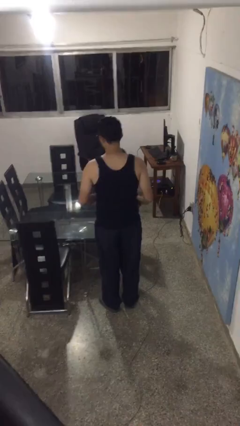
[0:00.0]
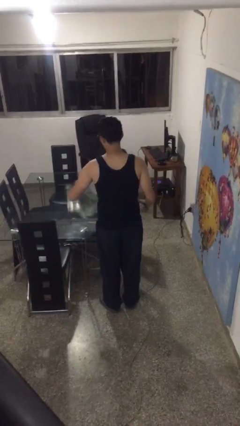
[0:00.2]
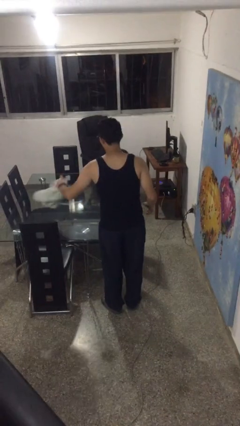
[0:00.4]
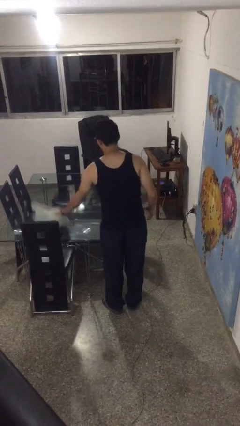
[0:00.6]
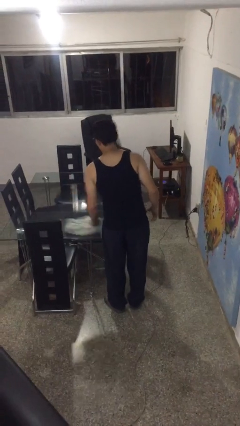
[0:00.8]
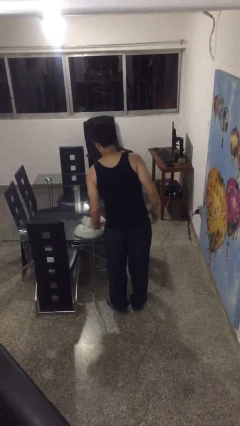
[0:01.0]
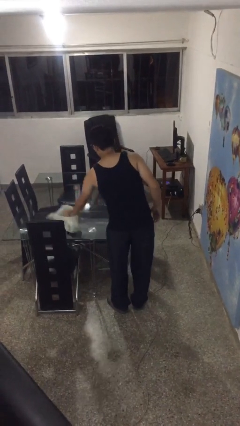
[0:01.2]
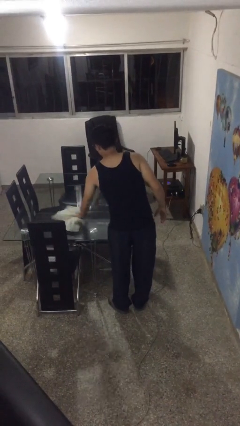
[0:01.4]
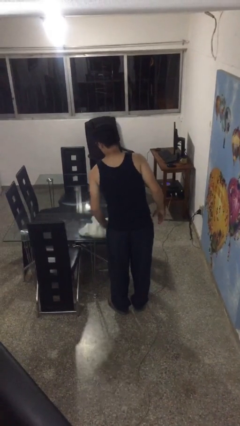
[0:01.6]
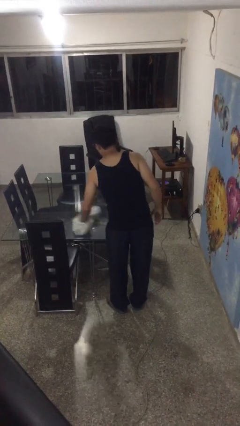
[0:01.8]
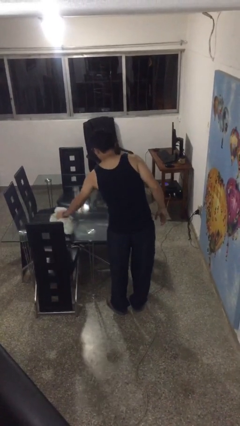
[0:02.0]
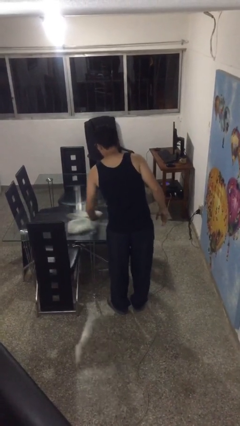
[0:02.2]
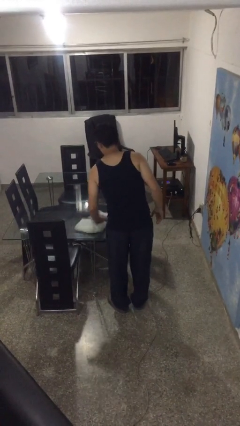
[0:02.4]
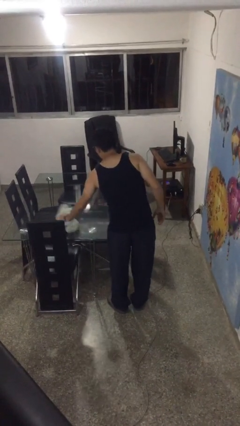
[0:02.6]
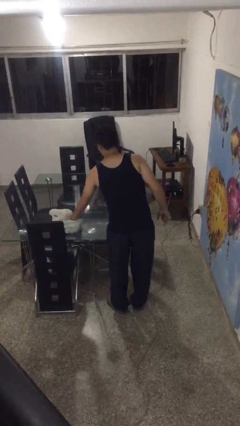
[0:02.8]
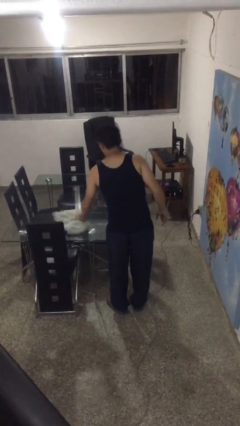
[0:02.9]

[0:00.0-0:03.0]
person cleans table with rag

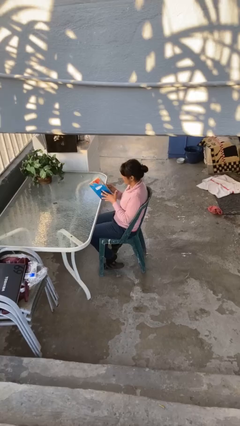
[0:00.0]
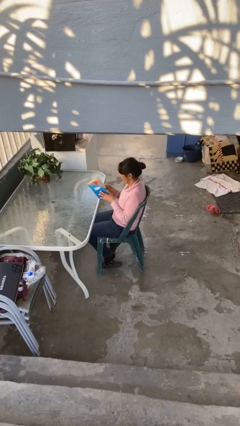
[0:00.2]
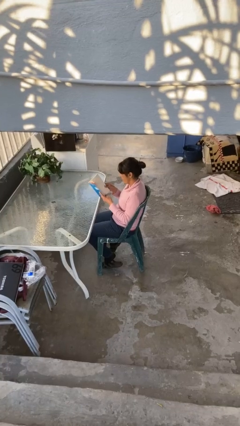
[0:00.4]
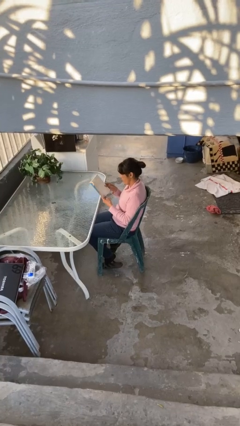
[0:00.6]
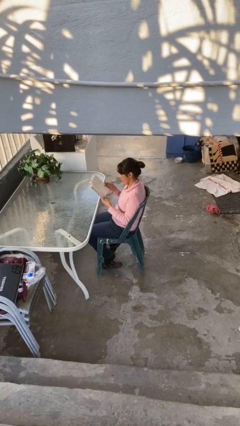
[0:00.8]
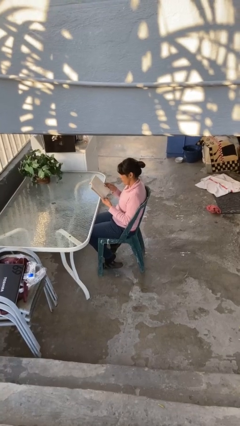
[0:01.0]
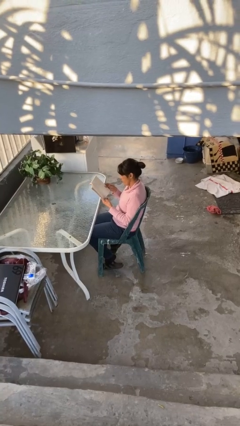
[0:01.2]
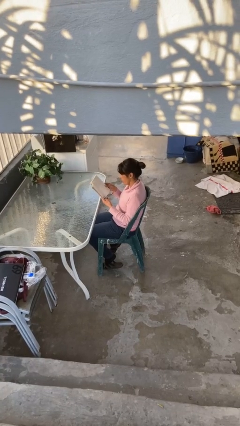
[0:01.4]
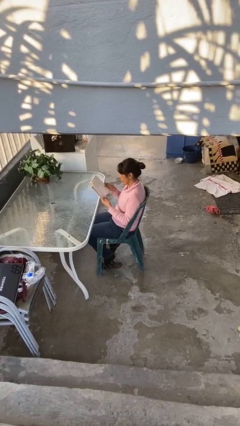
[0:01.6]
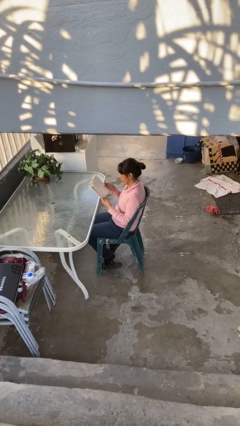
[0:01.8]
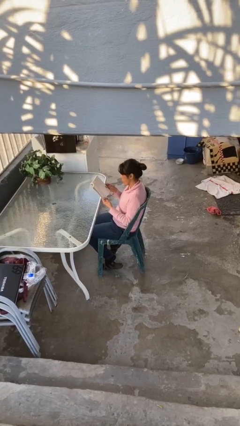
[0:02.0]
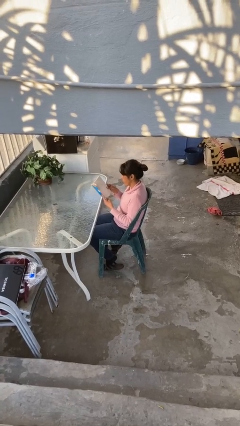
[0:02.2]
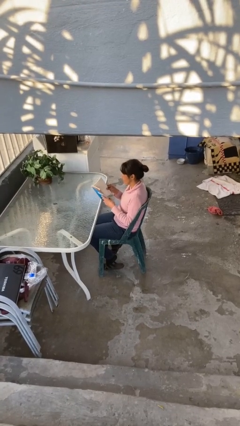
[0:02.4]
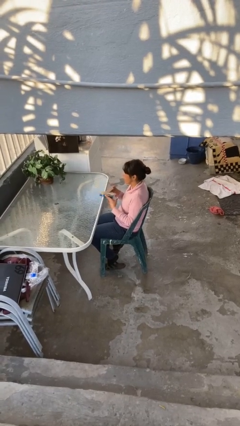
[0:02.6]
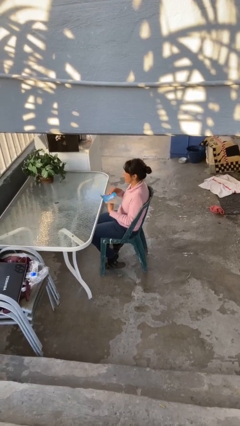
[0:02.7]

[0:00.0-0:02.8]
person reads document

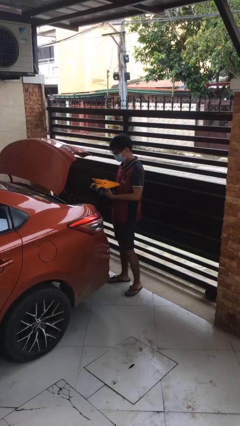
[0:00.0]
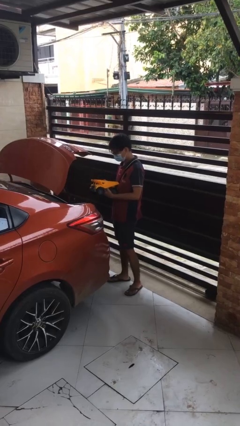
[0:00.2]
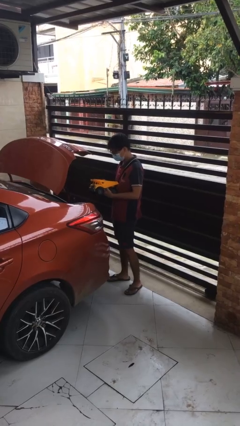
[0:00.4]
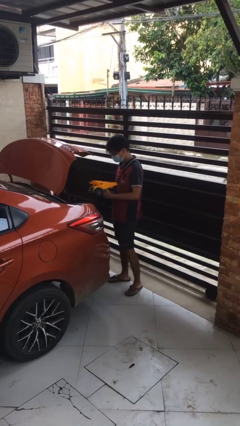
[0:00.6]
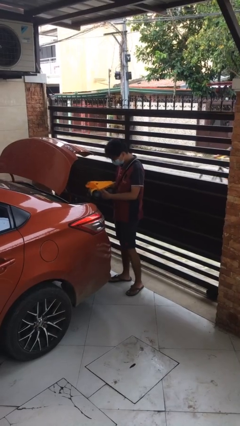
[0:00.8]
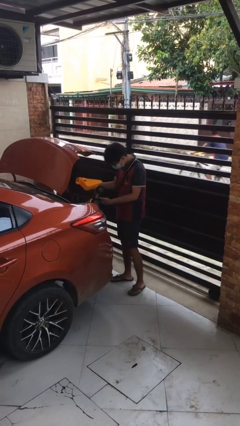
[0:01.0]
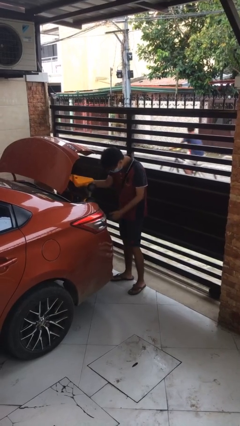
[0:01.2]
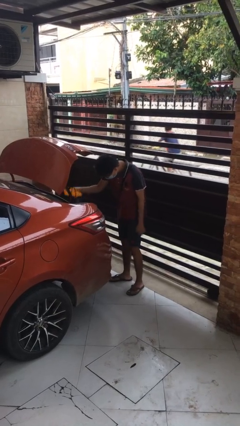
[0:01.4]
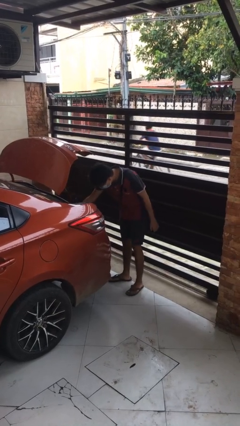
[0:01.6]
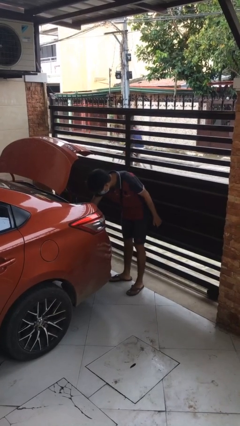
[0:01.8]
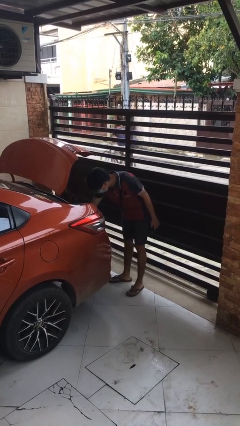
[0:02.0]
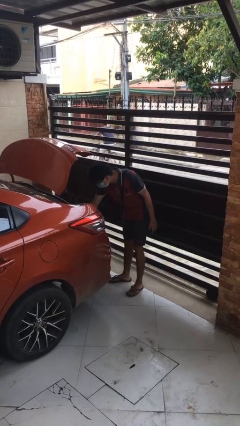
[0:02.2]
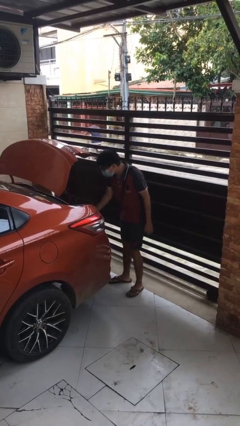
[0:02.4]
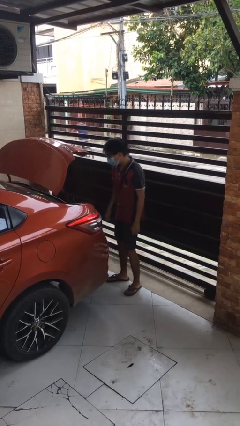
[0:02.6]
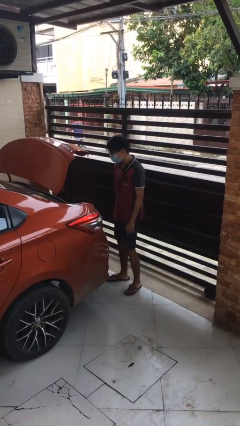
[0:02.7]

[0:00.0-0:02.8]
person loads car

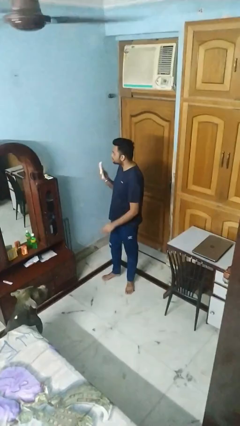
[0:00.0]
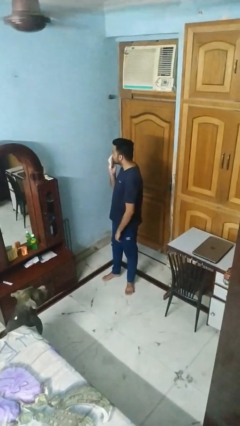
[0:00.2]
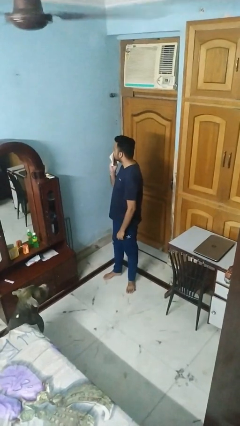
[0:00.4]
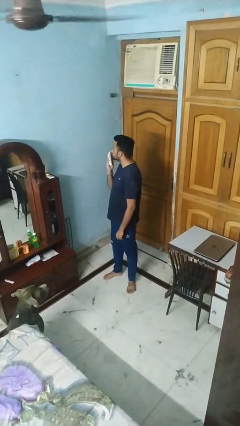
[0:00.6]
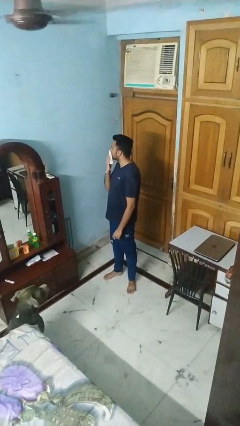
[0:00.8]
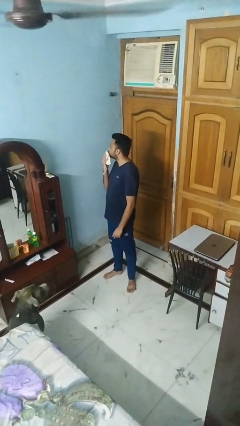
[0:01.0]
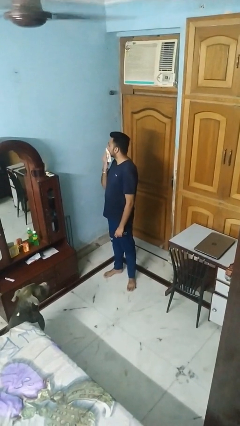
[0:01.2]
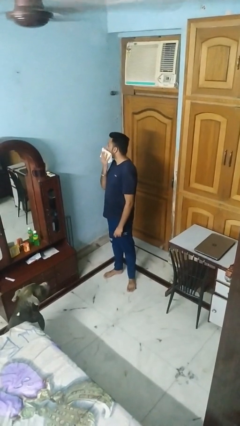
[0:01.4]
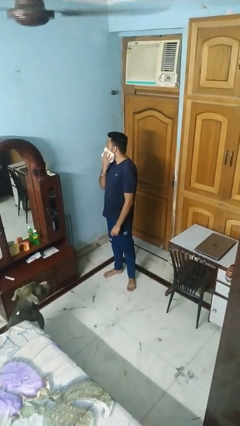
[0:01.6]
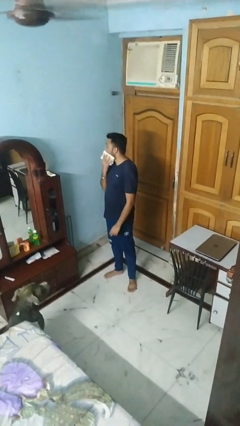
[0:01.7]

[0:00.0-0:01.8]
person wipes mouth with napkin

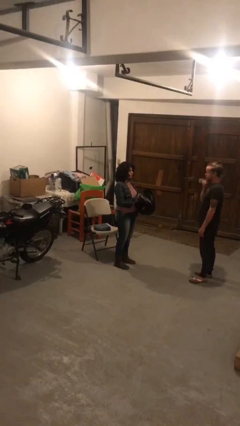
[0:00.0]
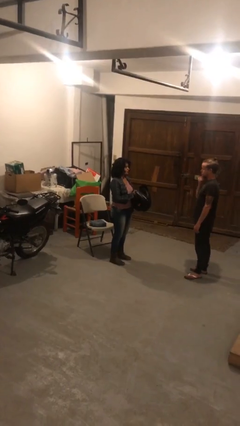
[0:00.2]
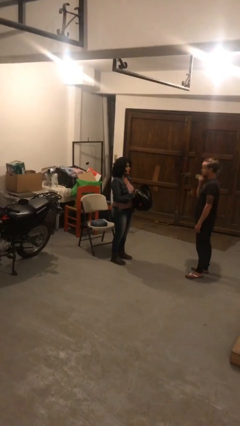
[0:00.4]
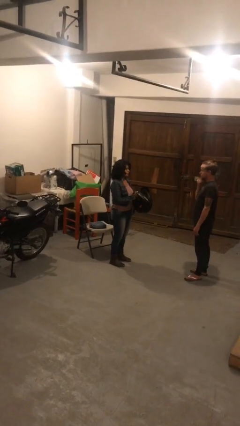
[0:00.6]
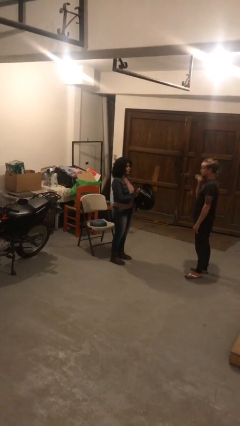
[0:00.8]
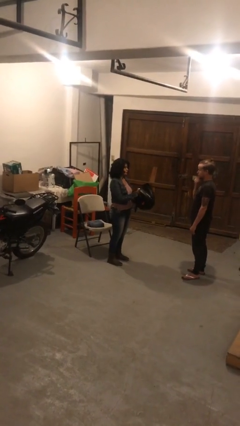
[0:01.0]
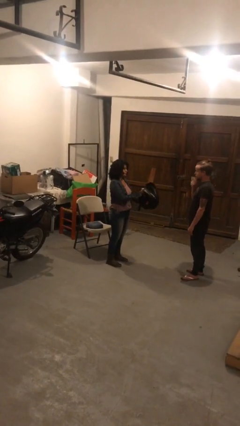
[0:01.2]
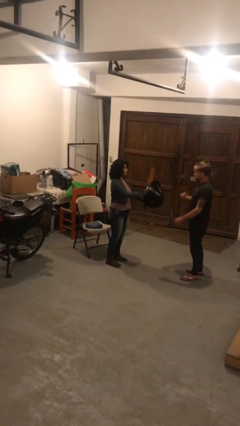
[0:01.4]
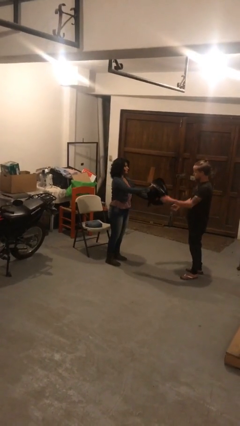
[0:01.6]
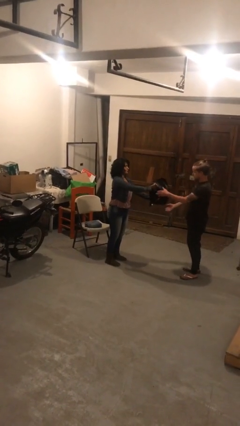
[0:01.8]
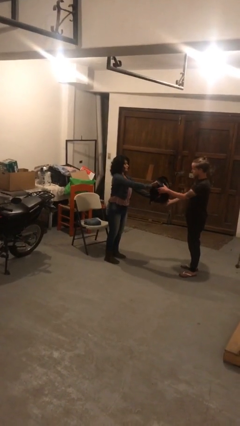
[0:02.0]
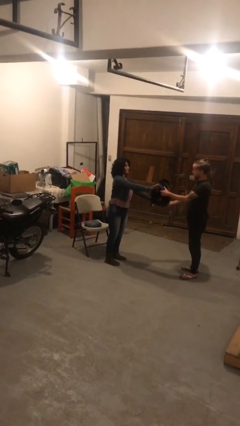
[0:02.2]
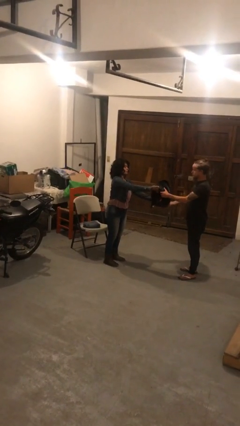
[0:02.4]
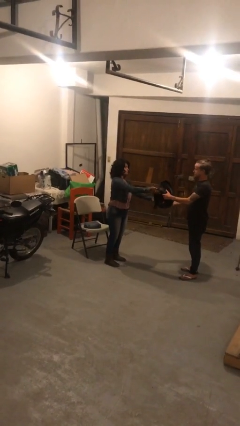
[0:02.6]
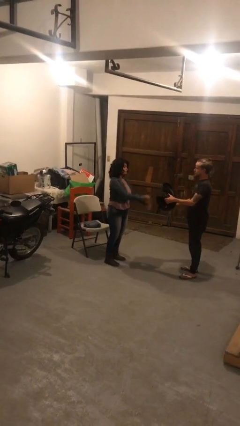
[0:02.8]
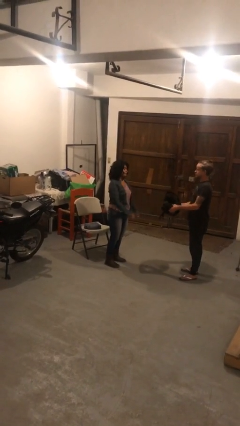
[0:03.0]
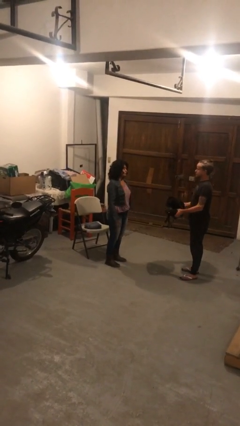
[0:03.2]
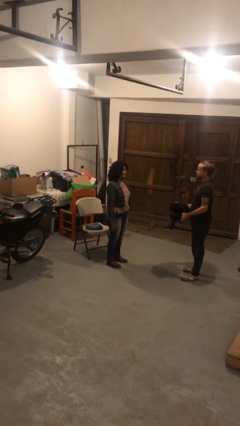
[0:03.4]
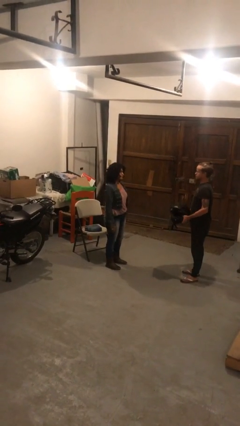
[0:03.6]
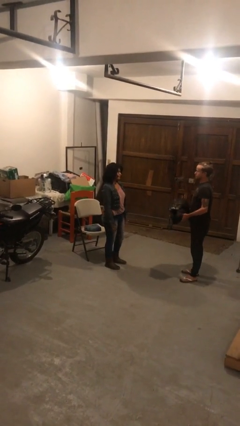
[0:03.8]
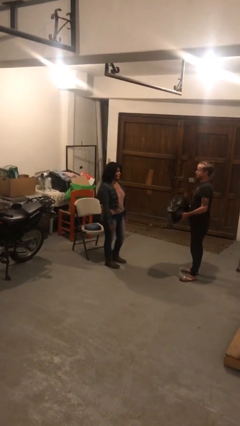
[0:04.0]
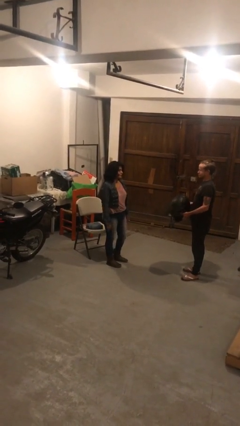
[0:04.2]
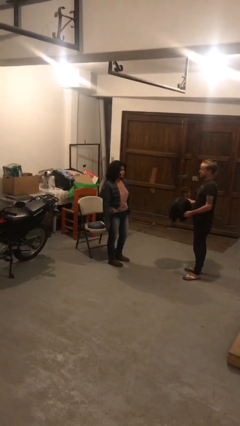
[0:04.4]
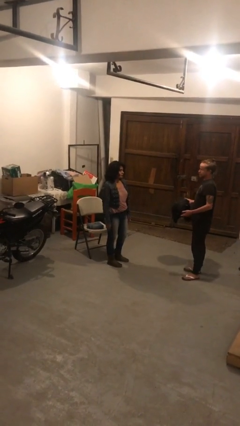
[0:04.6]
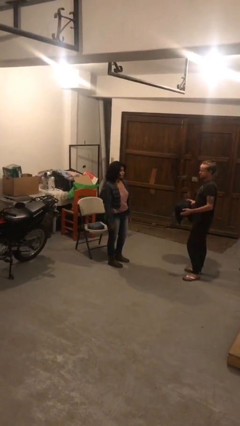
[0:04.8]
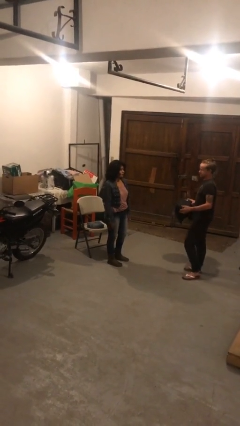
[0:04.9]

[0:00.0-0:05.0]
person transfers object to person

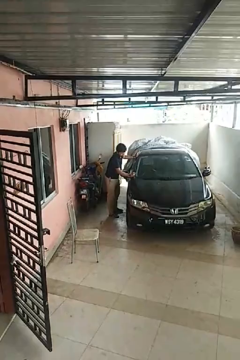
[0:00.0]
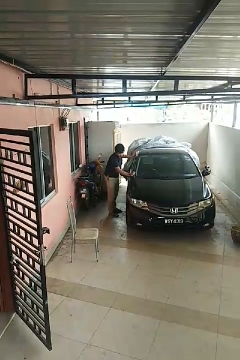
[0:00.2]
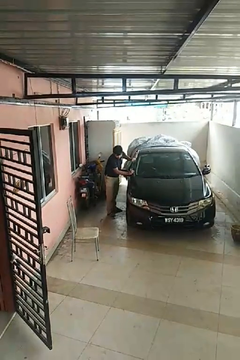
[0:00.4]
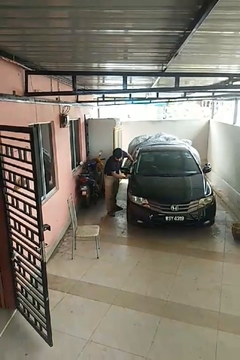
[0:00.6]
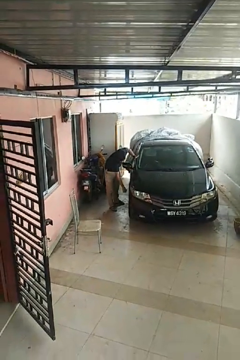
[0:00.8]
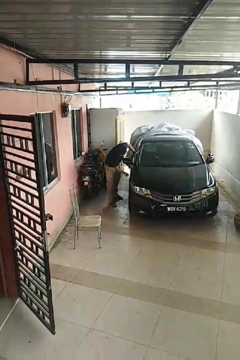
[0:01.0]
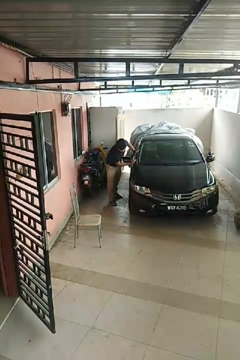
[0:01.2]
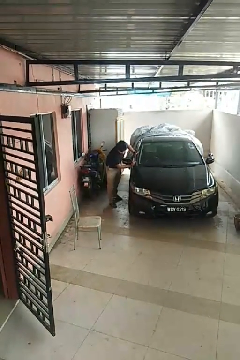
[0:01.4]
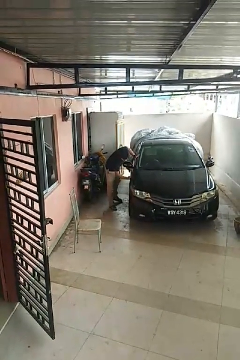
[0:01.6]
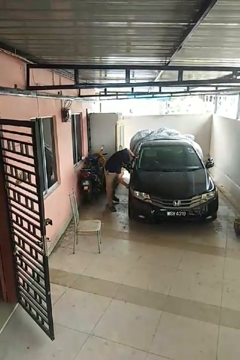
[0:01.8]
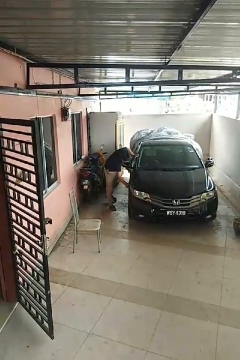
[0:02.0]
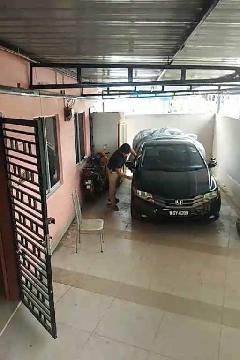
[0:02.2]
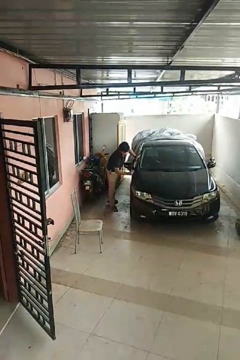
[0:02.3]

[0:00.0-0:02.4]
person polishes car with rag
